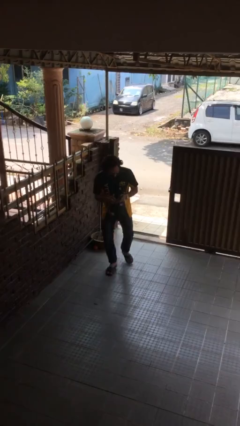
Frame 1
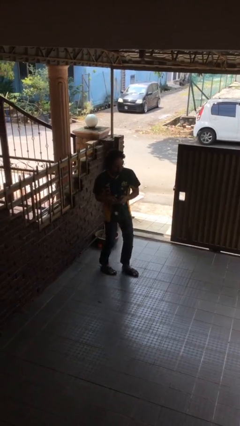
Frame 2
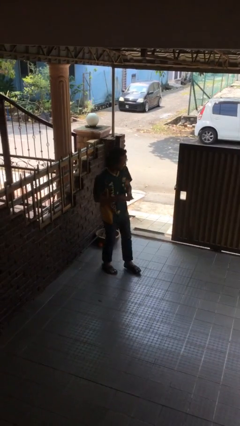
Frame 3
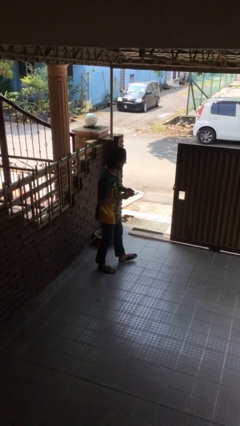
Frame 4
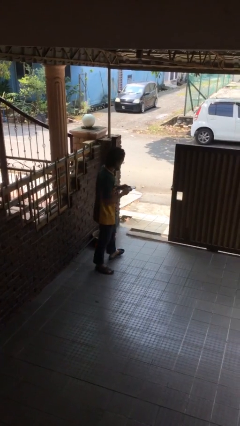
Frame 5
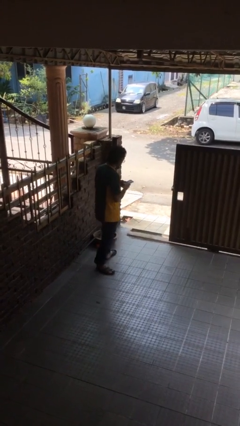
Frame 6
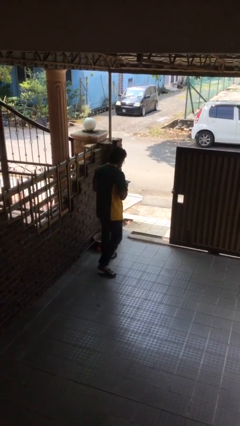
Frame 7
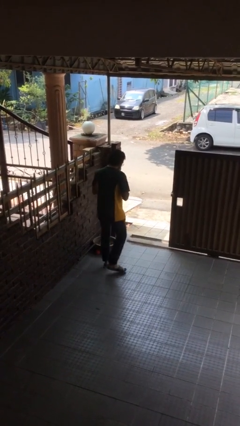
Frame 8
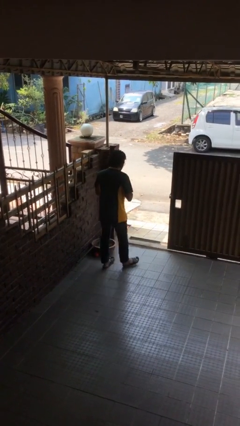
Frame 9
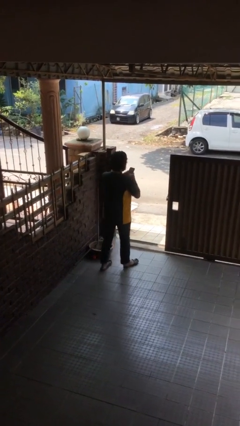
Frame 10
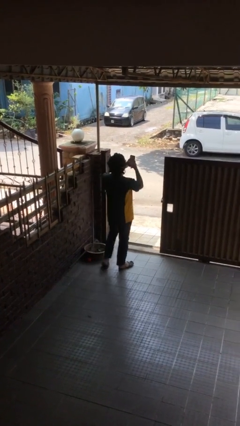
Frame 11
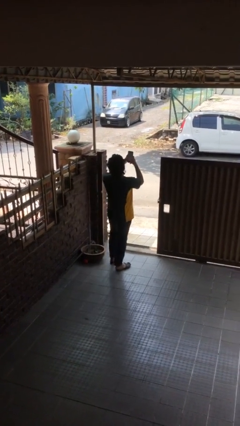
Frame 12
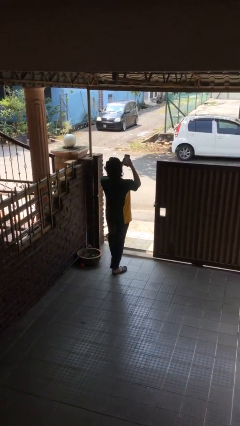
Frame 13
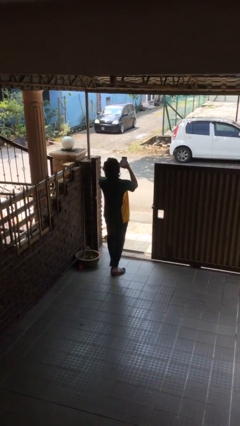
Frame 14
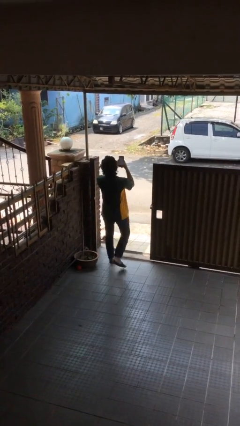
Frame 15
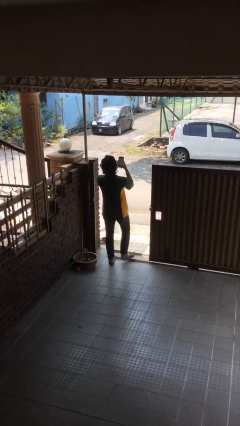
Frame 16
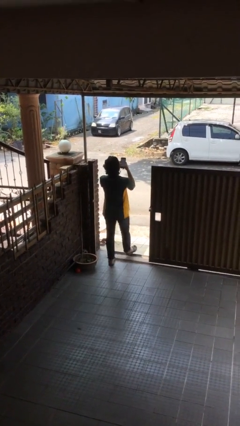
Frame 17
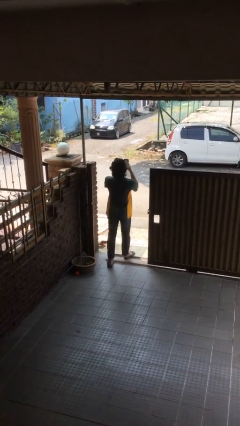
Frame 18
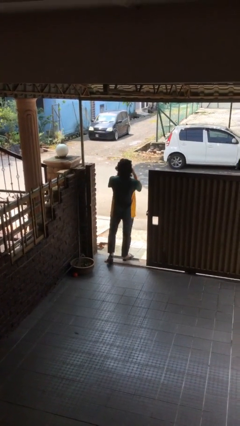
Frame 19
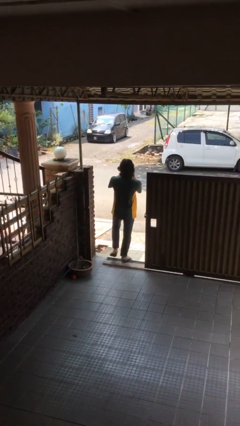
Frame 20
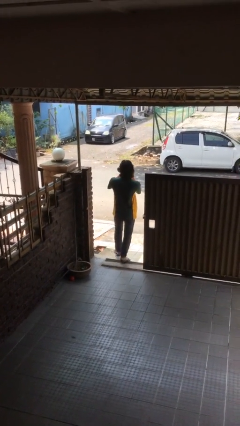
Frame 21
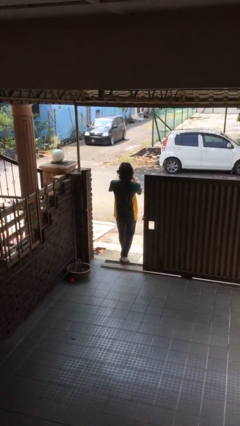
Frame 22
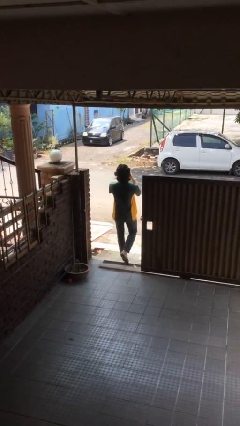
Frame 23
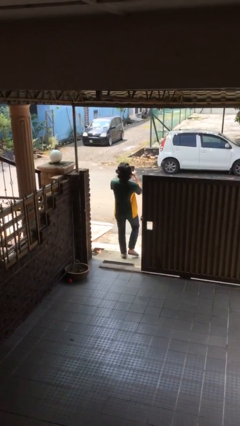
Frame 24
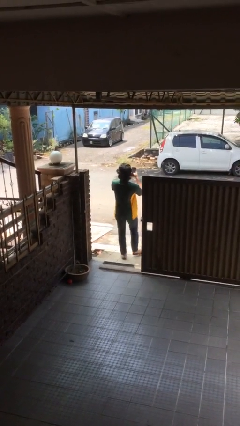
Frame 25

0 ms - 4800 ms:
person exits scene through structure

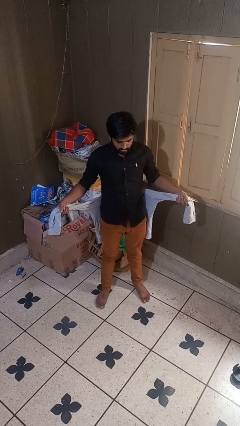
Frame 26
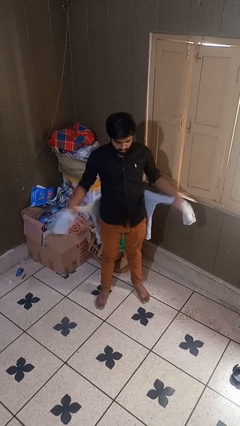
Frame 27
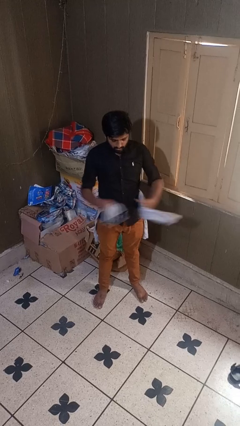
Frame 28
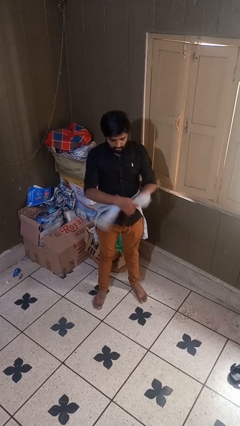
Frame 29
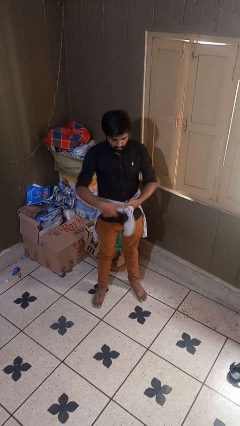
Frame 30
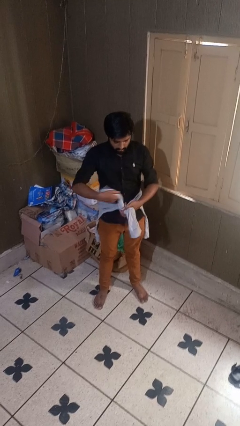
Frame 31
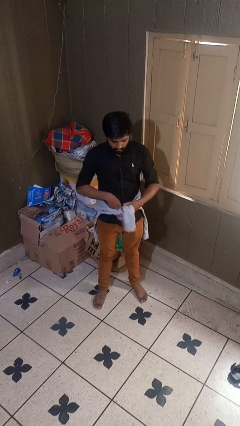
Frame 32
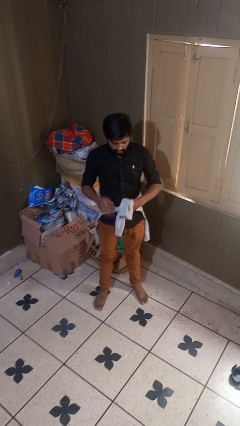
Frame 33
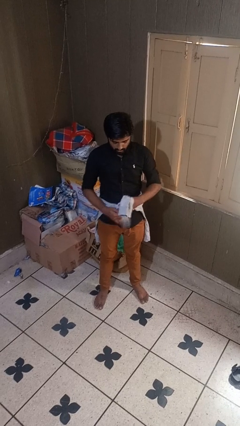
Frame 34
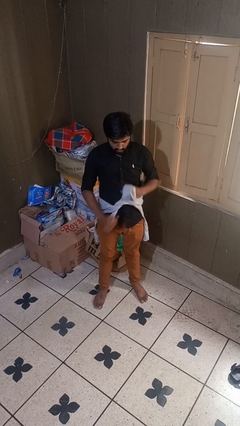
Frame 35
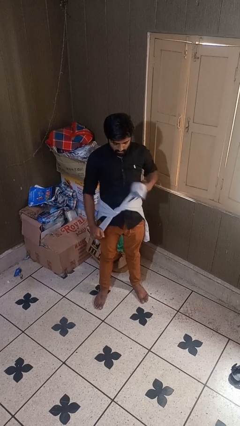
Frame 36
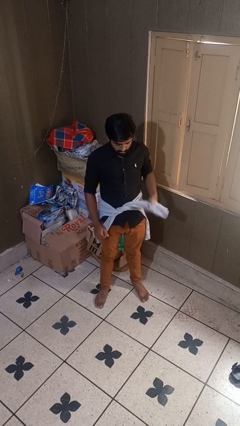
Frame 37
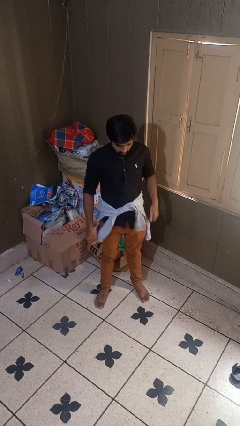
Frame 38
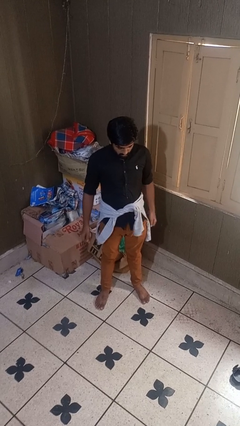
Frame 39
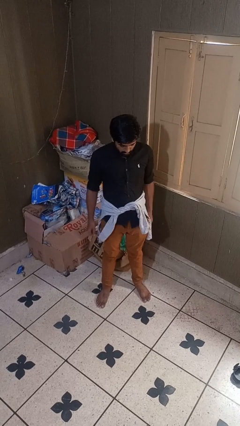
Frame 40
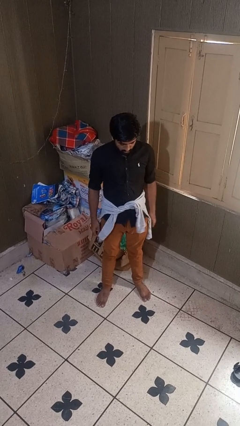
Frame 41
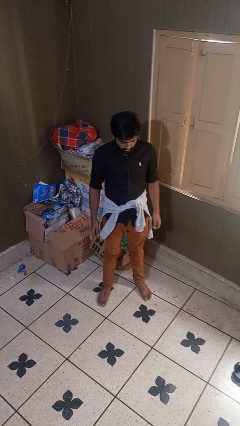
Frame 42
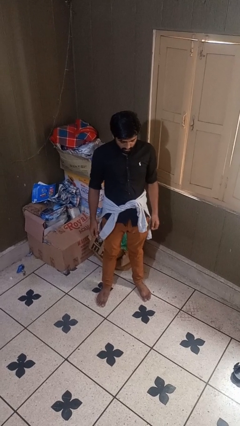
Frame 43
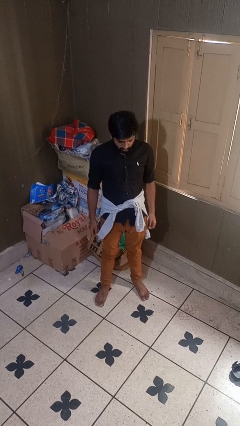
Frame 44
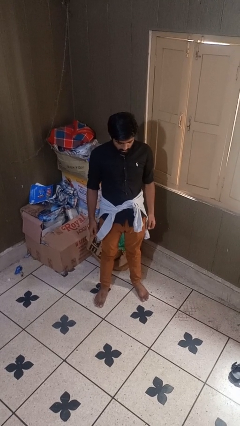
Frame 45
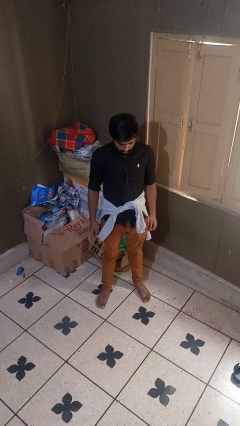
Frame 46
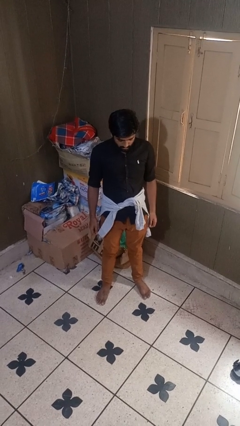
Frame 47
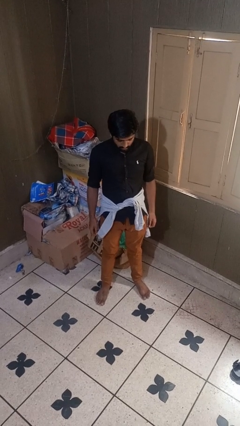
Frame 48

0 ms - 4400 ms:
person ties jacket around waist

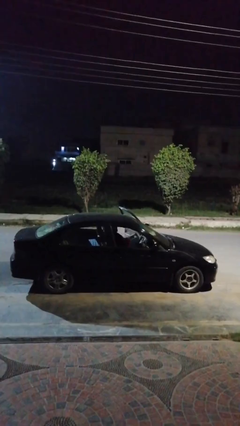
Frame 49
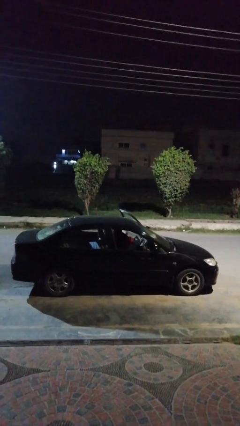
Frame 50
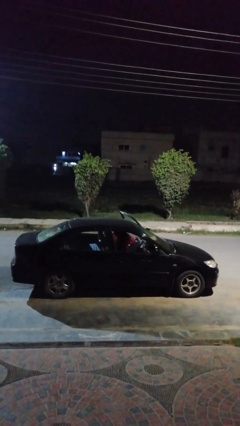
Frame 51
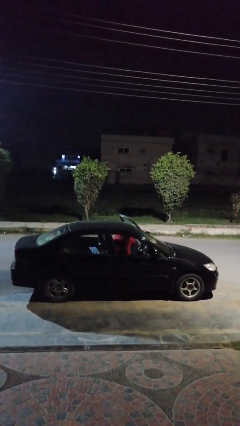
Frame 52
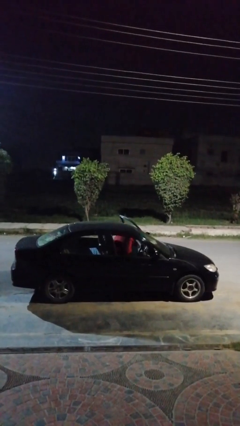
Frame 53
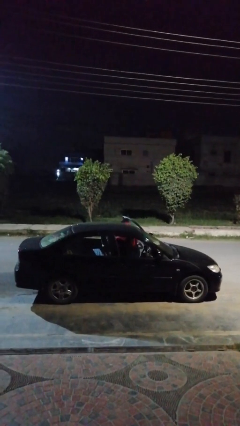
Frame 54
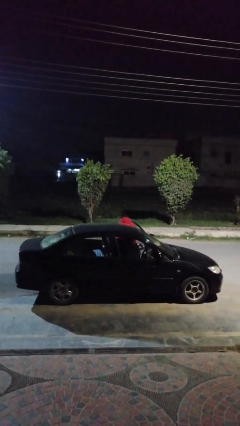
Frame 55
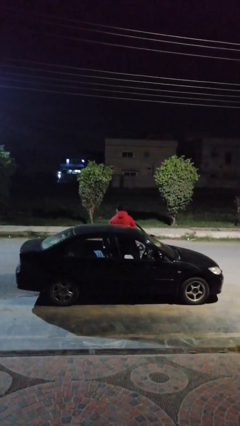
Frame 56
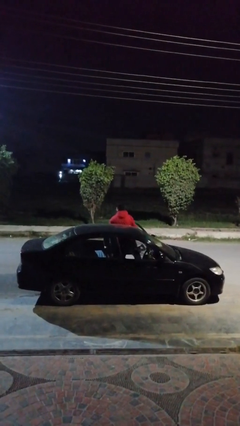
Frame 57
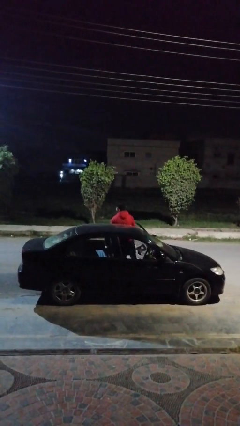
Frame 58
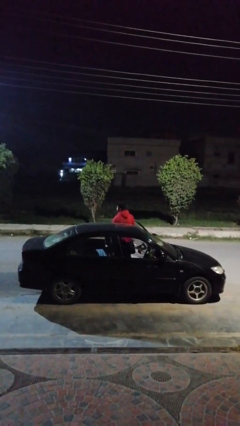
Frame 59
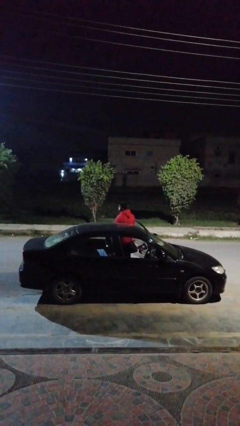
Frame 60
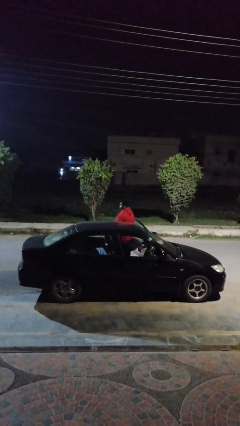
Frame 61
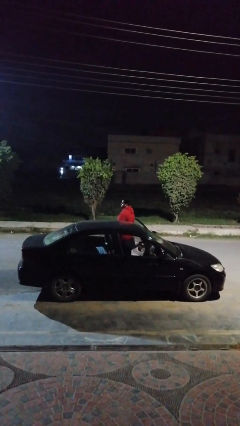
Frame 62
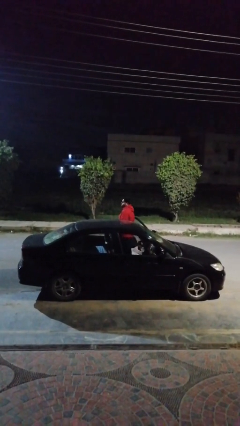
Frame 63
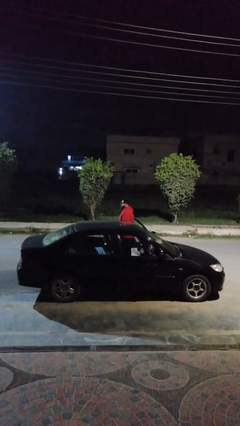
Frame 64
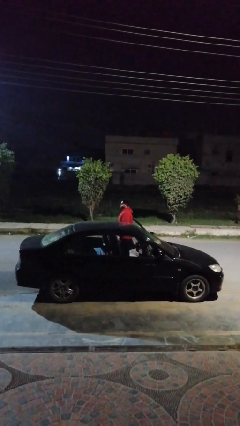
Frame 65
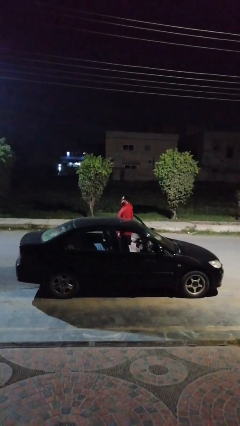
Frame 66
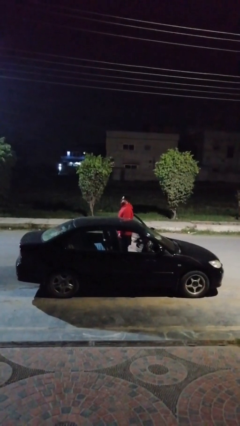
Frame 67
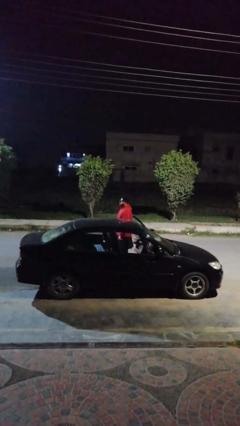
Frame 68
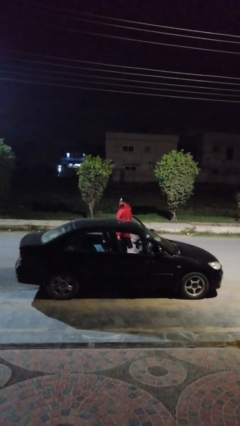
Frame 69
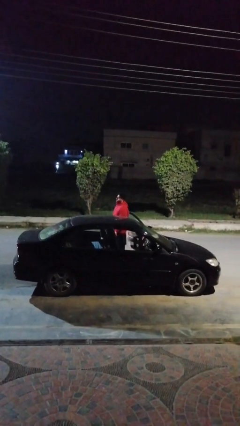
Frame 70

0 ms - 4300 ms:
person exits car

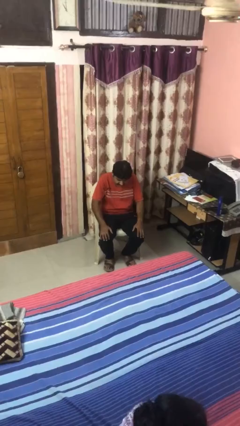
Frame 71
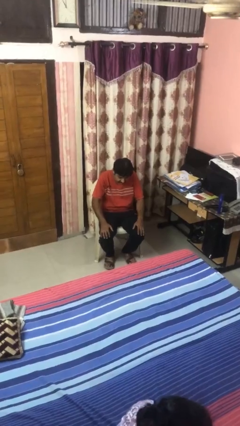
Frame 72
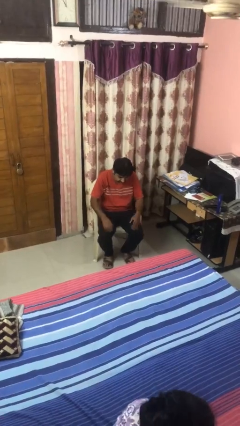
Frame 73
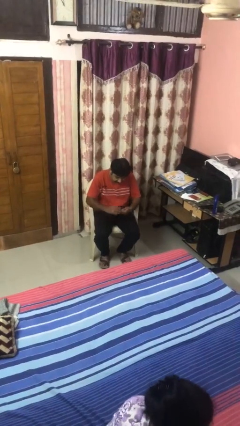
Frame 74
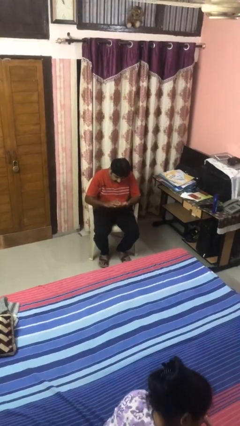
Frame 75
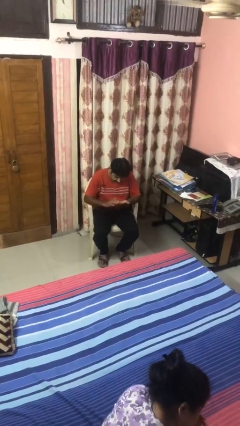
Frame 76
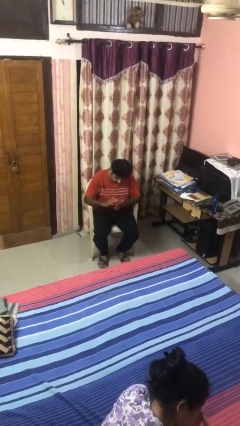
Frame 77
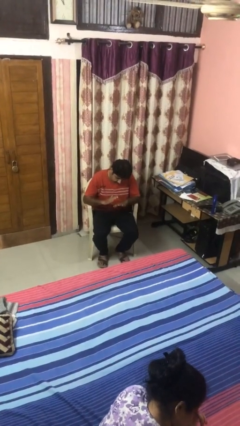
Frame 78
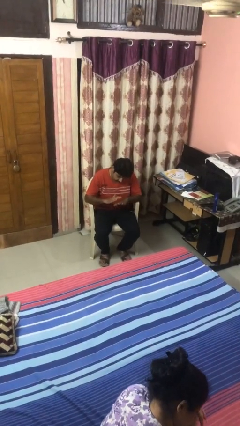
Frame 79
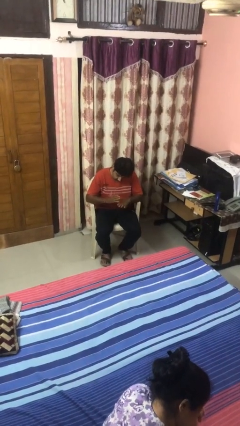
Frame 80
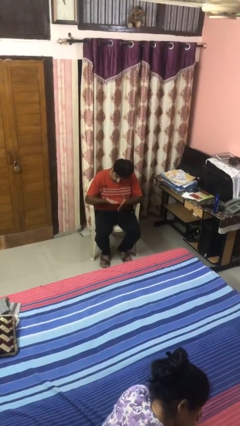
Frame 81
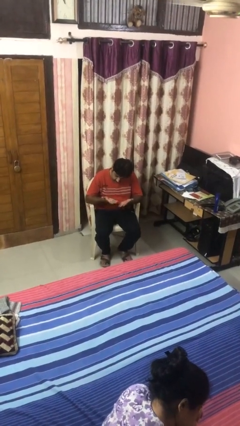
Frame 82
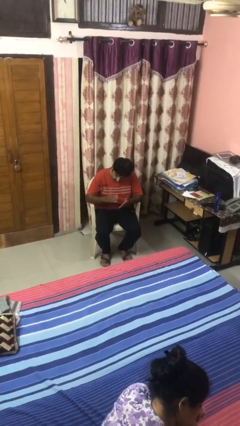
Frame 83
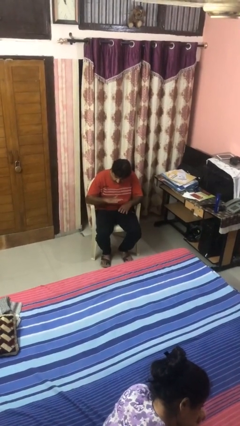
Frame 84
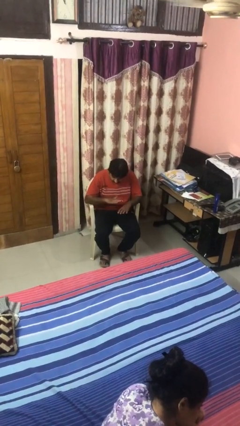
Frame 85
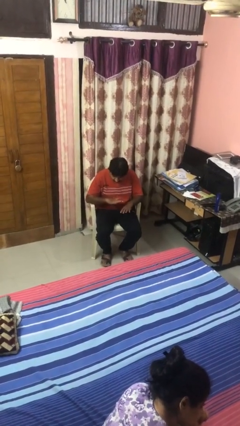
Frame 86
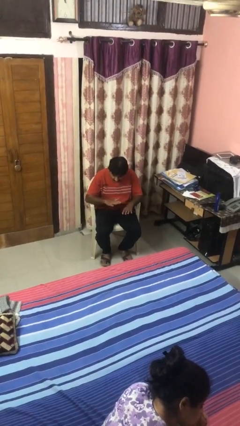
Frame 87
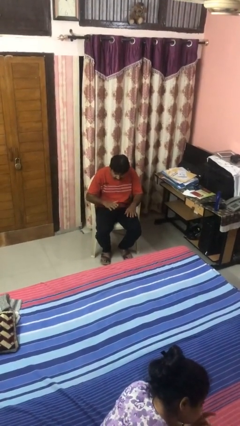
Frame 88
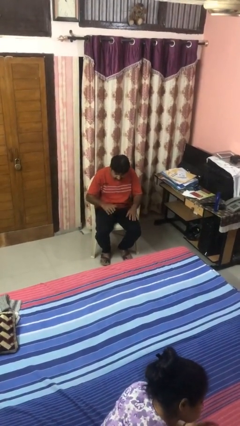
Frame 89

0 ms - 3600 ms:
person looks at hands in lap

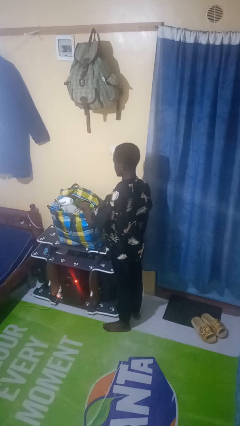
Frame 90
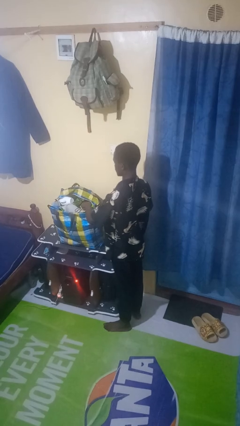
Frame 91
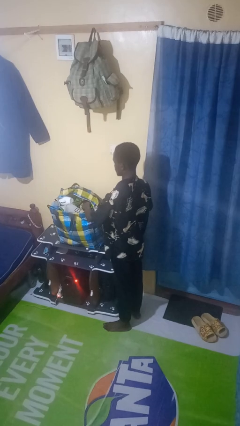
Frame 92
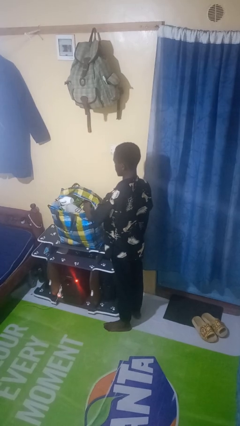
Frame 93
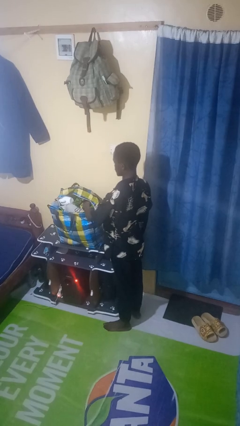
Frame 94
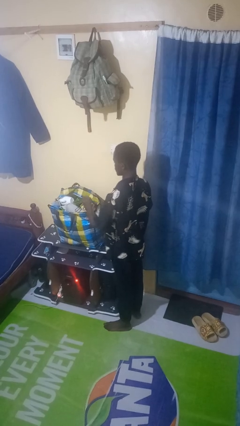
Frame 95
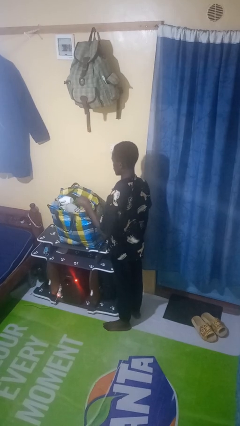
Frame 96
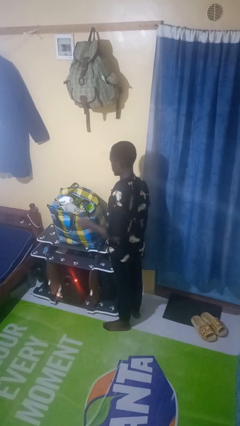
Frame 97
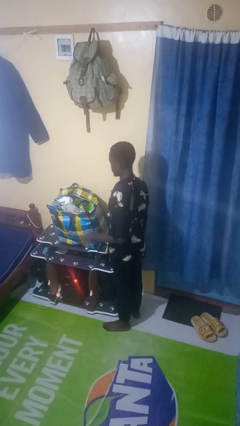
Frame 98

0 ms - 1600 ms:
person puts object into bag
